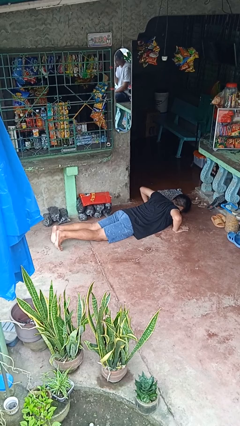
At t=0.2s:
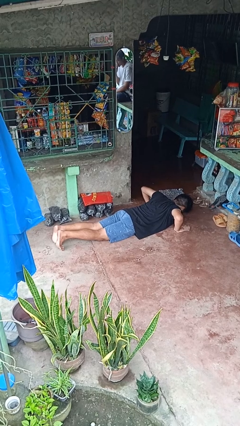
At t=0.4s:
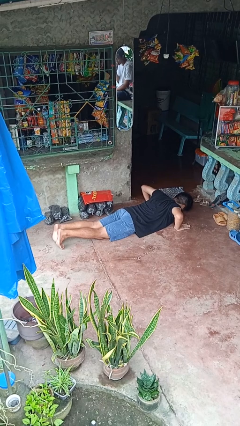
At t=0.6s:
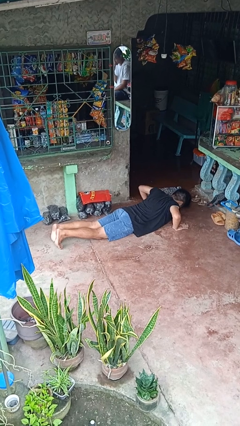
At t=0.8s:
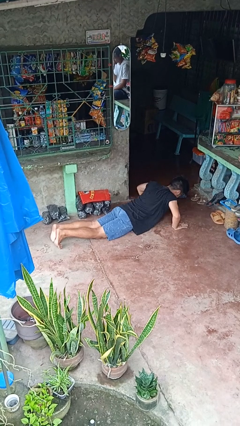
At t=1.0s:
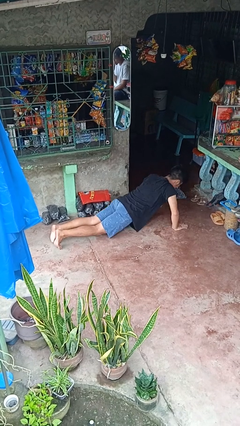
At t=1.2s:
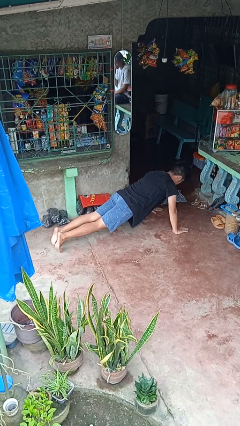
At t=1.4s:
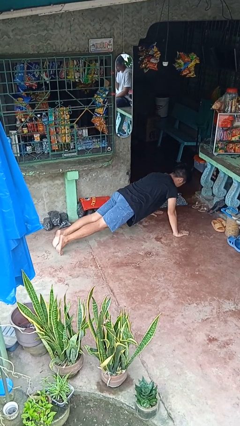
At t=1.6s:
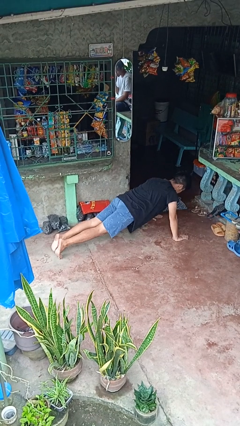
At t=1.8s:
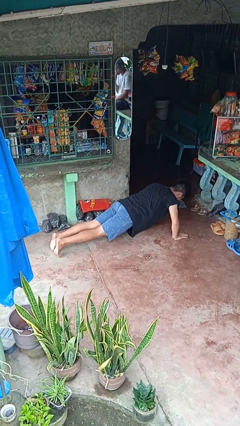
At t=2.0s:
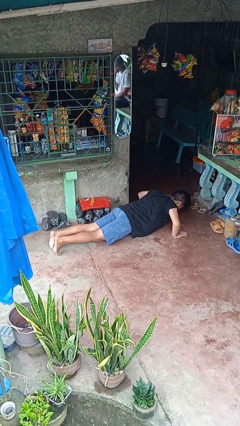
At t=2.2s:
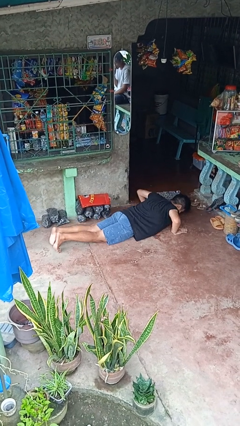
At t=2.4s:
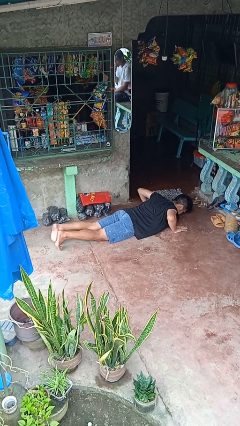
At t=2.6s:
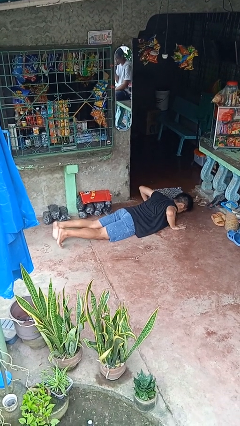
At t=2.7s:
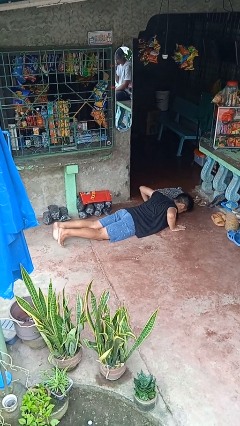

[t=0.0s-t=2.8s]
person exercises with pushup

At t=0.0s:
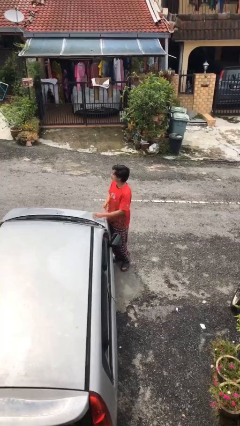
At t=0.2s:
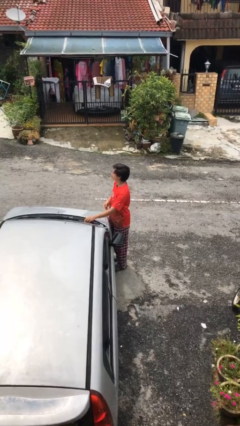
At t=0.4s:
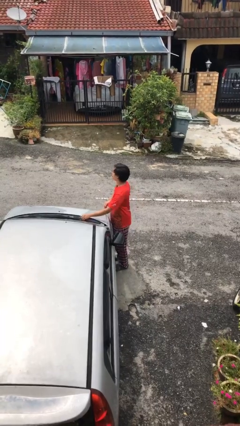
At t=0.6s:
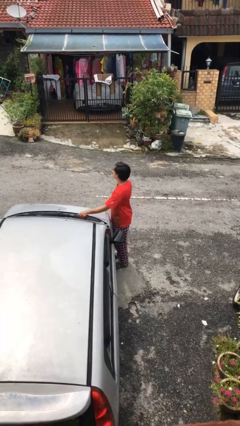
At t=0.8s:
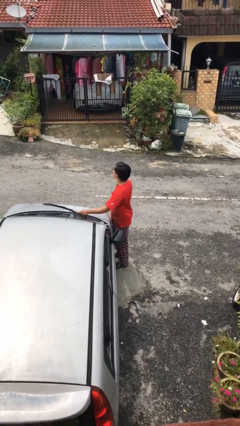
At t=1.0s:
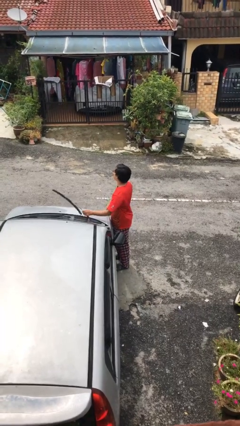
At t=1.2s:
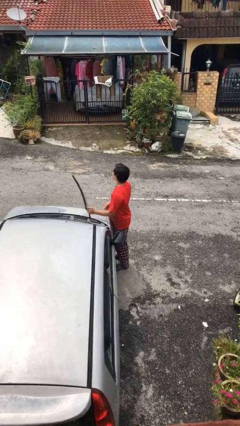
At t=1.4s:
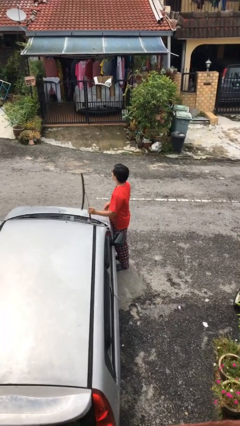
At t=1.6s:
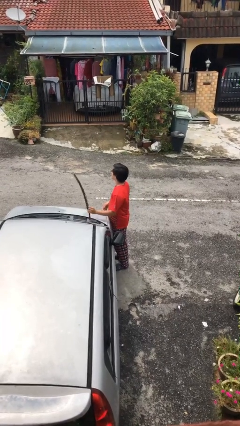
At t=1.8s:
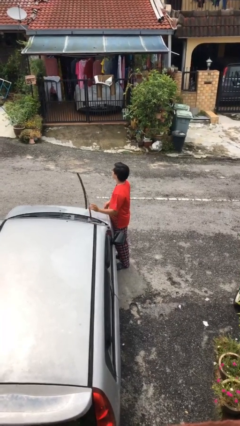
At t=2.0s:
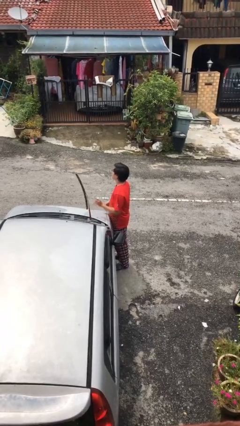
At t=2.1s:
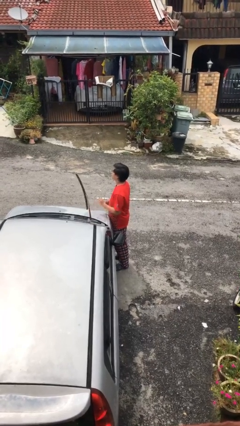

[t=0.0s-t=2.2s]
person flips up car wipers

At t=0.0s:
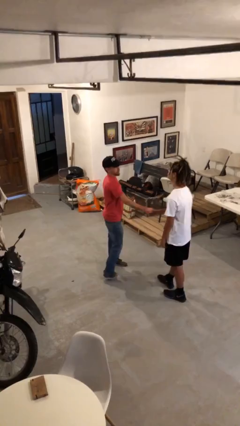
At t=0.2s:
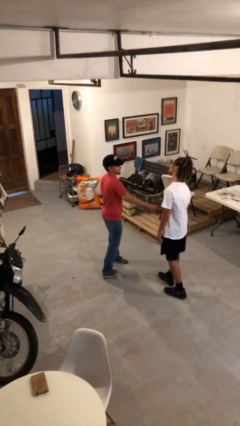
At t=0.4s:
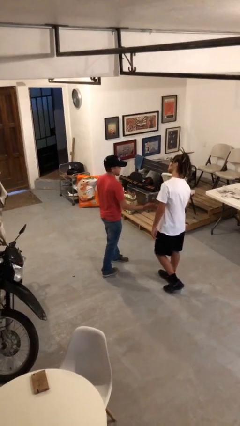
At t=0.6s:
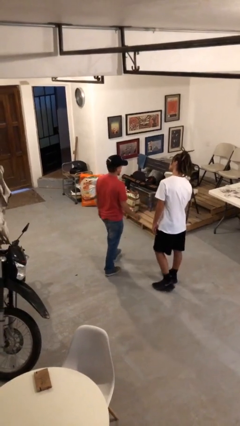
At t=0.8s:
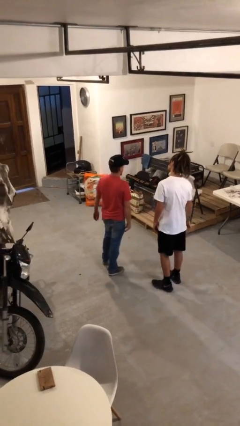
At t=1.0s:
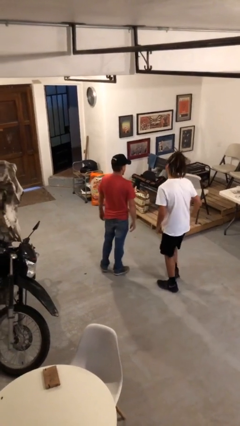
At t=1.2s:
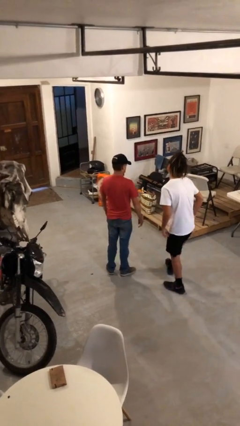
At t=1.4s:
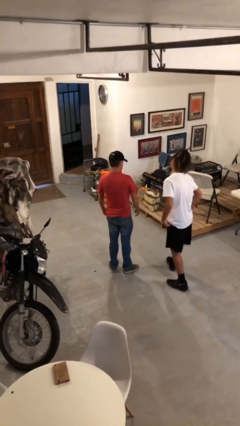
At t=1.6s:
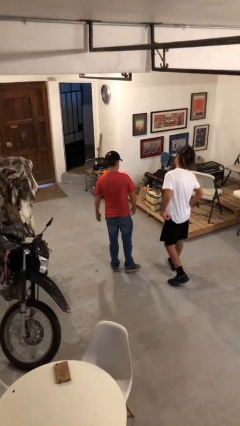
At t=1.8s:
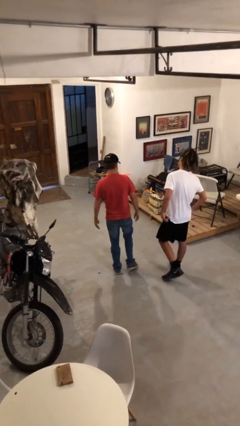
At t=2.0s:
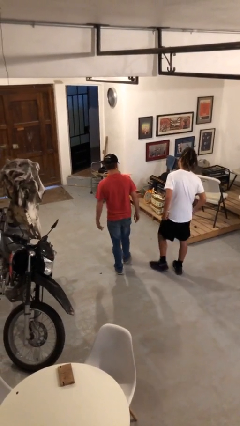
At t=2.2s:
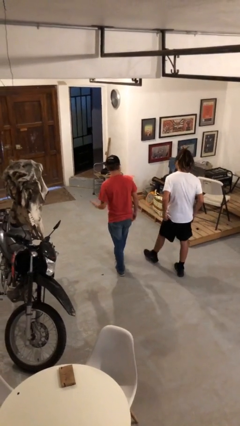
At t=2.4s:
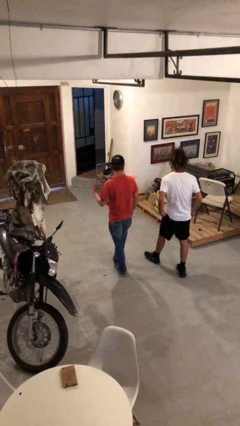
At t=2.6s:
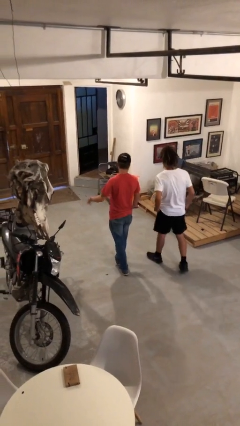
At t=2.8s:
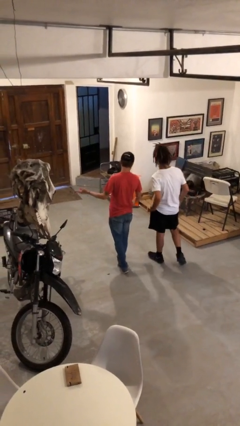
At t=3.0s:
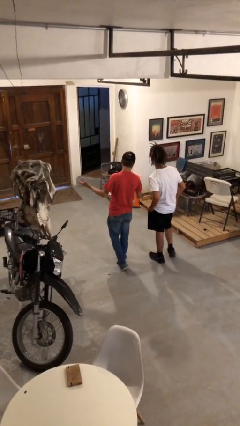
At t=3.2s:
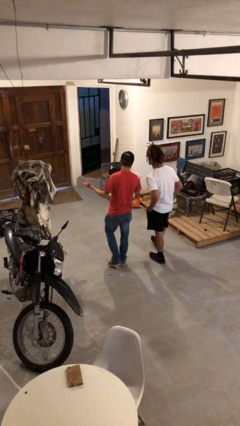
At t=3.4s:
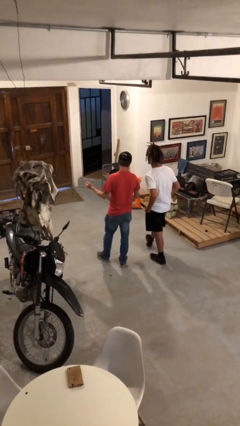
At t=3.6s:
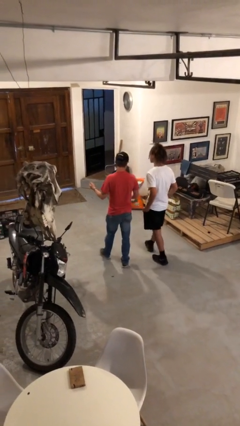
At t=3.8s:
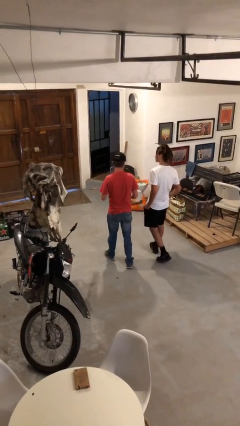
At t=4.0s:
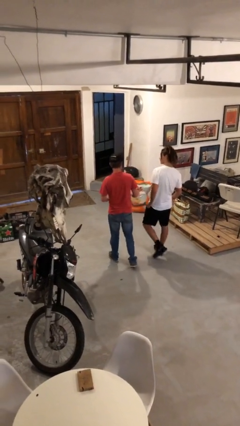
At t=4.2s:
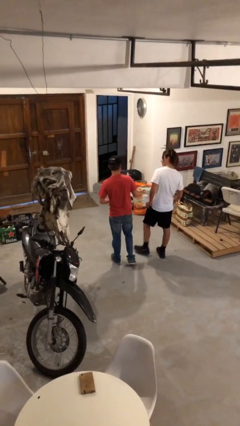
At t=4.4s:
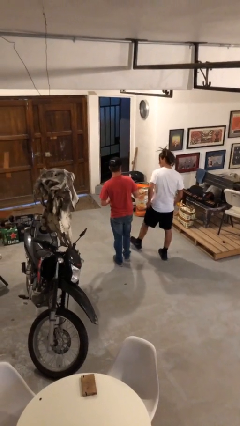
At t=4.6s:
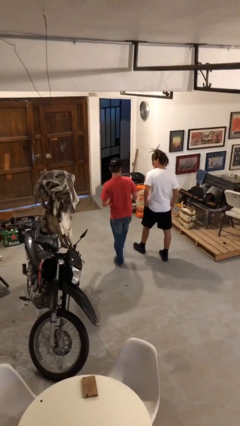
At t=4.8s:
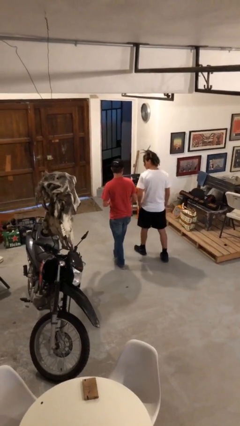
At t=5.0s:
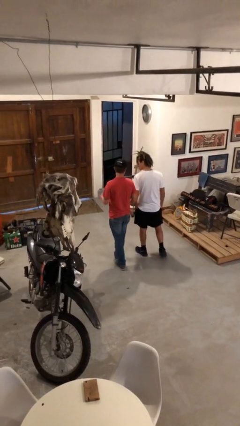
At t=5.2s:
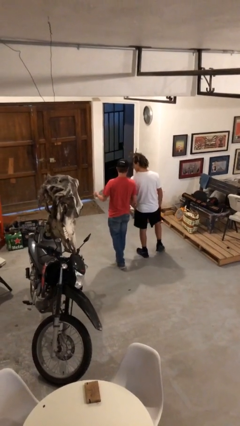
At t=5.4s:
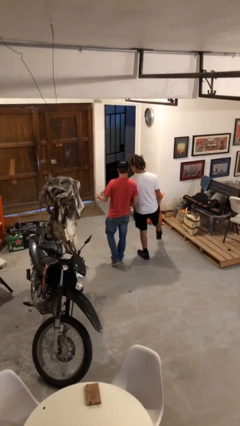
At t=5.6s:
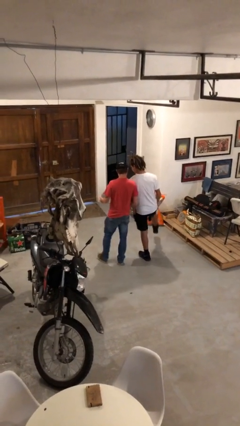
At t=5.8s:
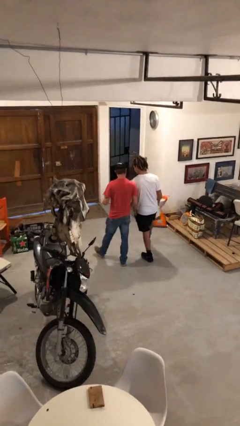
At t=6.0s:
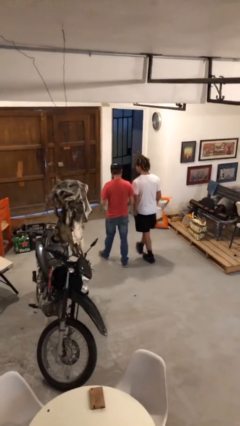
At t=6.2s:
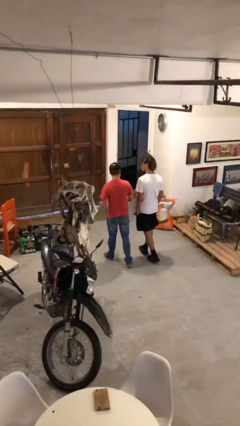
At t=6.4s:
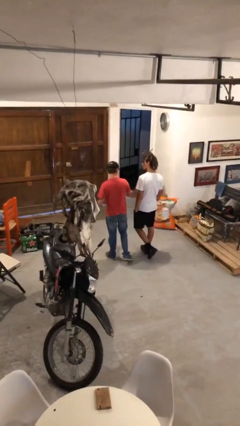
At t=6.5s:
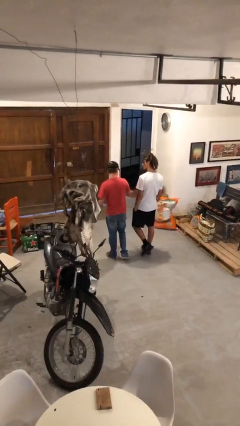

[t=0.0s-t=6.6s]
person talks to person

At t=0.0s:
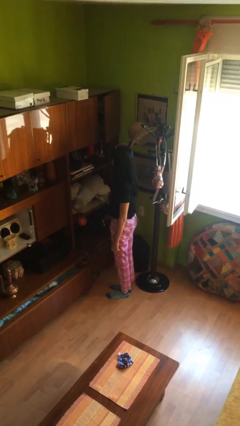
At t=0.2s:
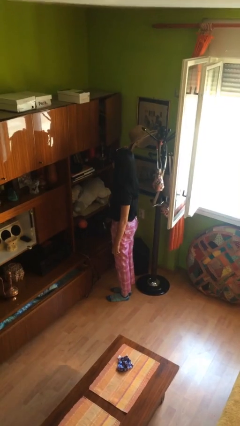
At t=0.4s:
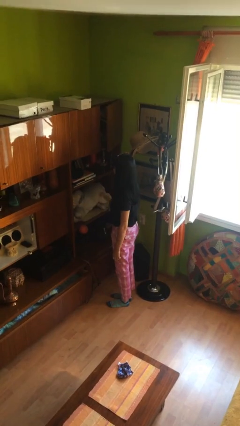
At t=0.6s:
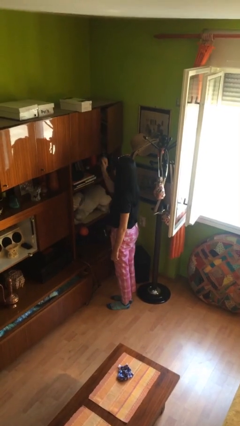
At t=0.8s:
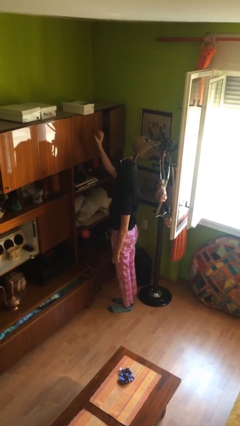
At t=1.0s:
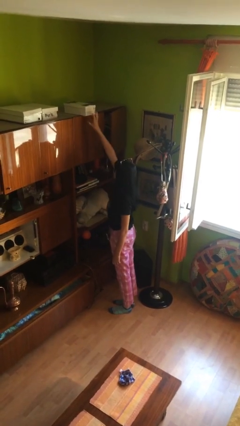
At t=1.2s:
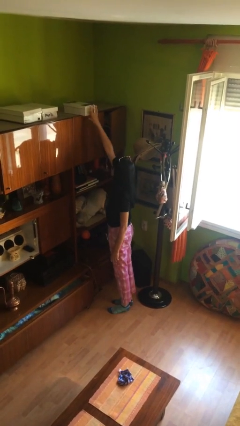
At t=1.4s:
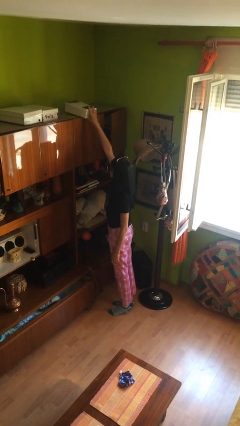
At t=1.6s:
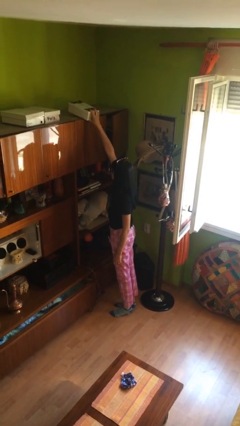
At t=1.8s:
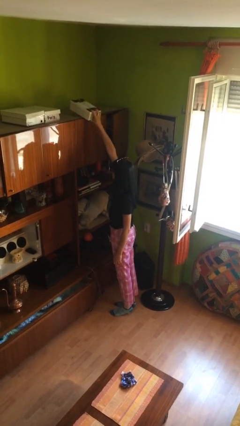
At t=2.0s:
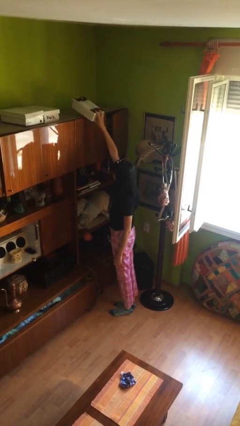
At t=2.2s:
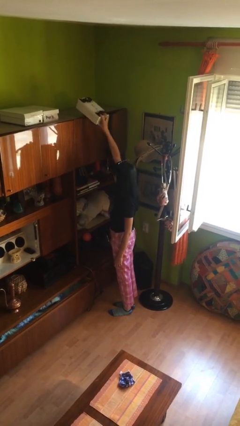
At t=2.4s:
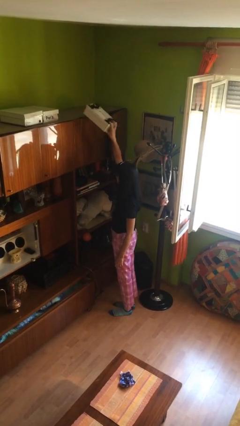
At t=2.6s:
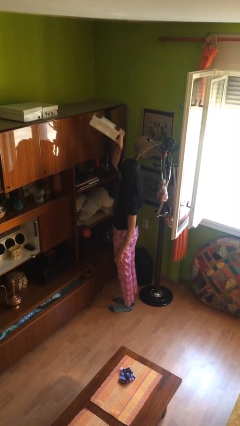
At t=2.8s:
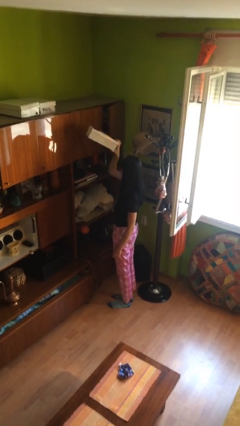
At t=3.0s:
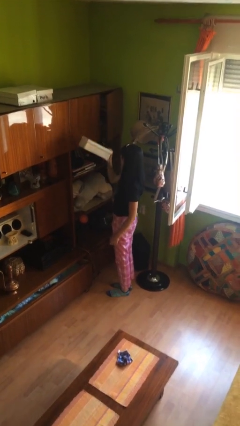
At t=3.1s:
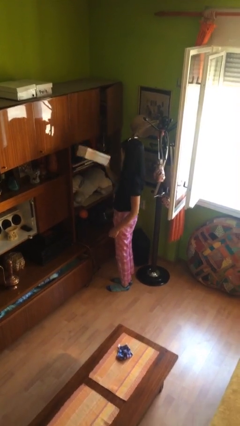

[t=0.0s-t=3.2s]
person picks up object from shelf

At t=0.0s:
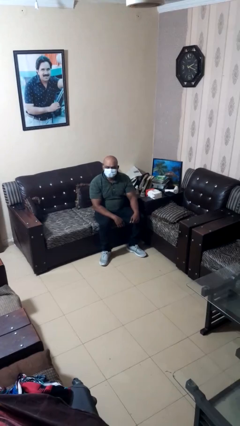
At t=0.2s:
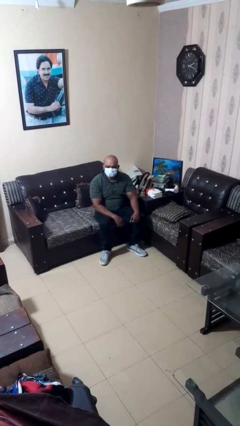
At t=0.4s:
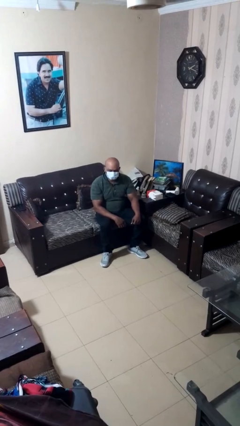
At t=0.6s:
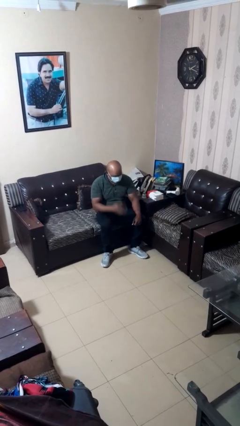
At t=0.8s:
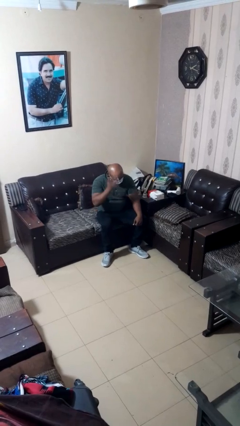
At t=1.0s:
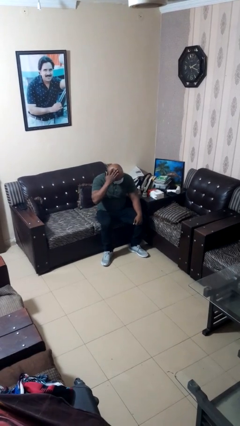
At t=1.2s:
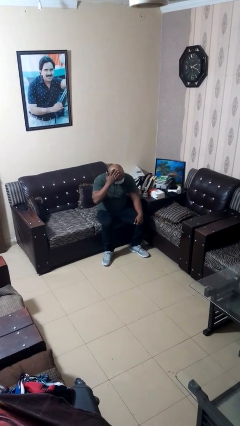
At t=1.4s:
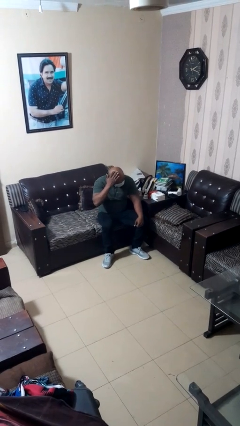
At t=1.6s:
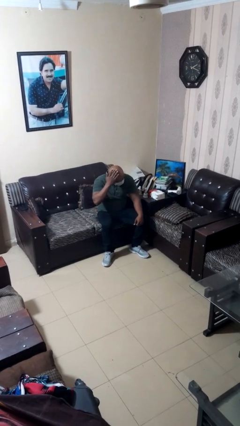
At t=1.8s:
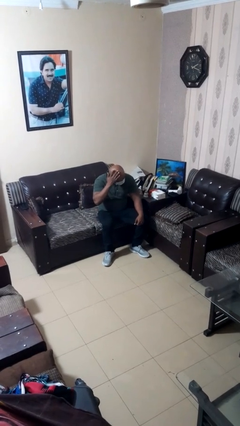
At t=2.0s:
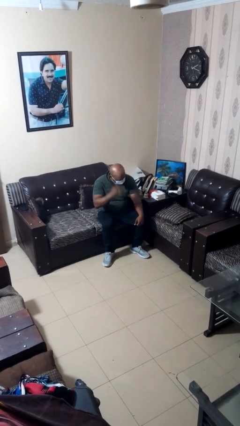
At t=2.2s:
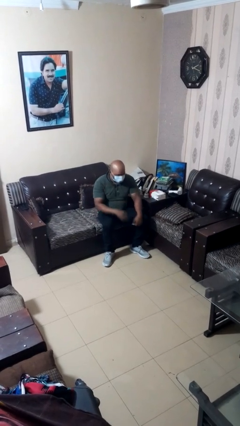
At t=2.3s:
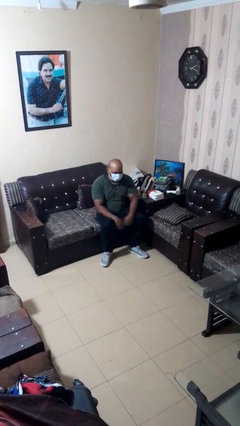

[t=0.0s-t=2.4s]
person pats head

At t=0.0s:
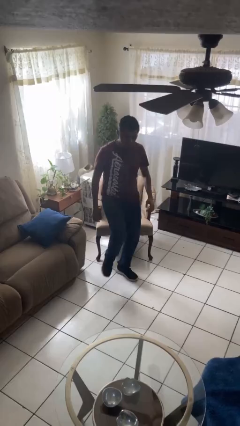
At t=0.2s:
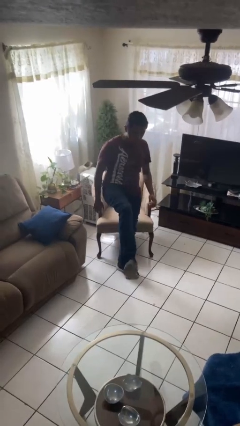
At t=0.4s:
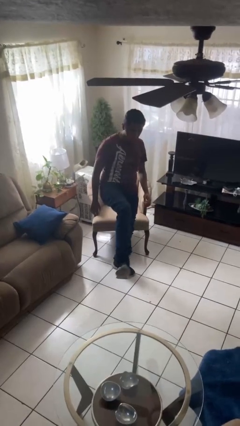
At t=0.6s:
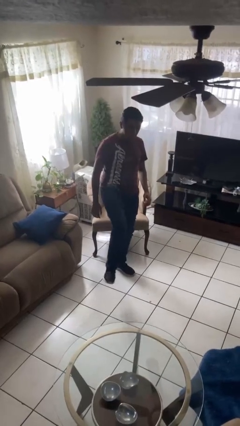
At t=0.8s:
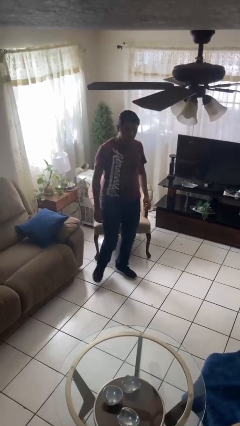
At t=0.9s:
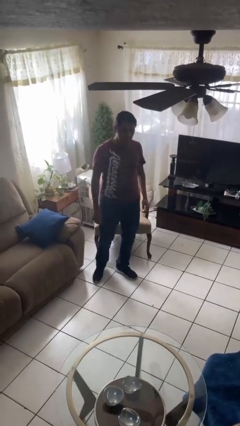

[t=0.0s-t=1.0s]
person karate kicks
